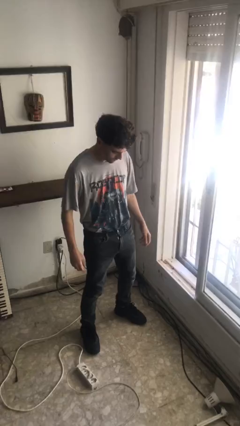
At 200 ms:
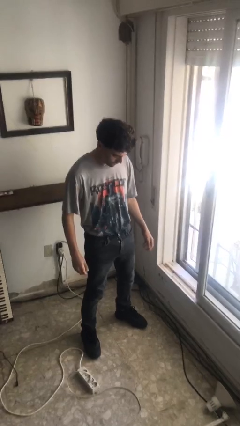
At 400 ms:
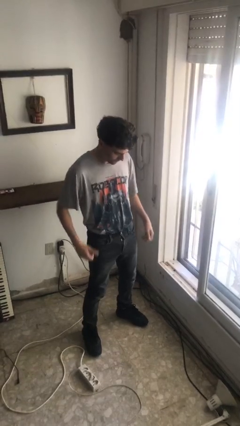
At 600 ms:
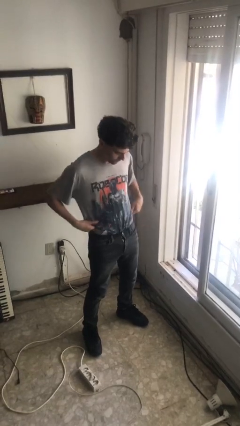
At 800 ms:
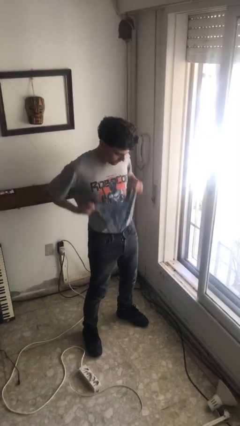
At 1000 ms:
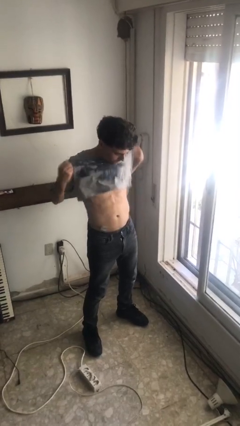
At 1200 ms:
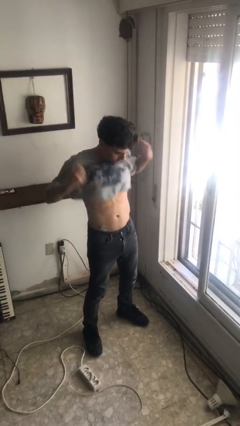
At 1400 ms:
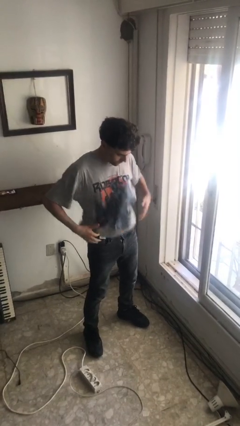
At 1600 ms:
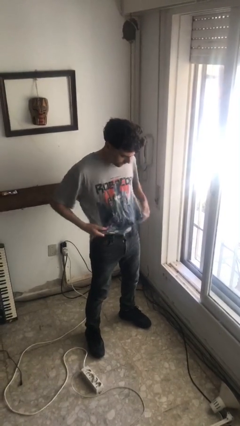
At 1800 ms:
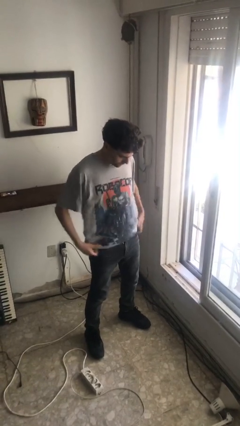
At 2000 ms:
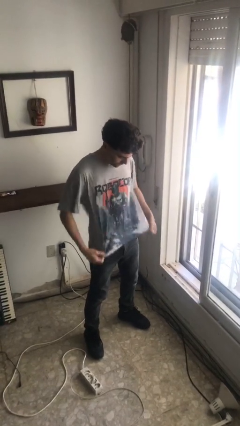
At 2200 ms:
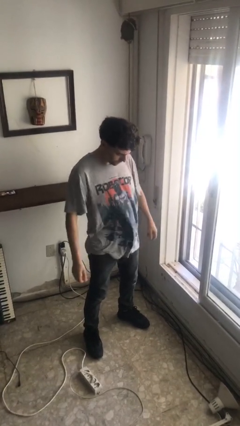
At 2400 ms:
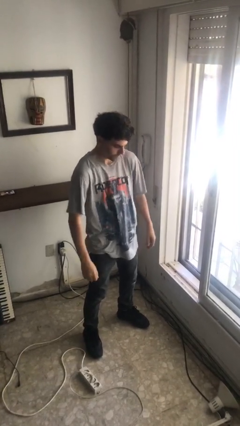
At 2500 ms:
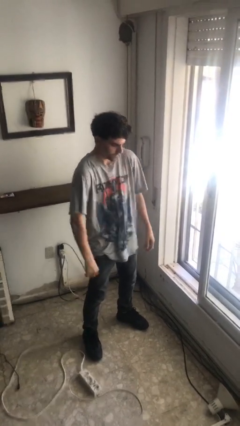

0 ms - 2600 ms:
person untucks shirt

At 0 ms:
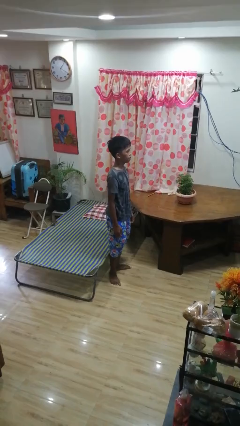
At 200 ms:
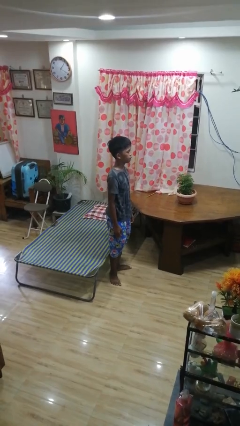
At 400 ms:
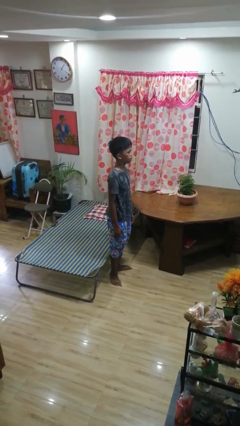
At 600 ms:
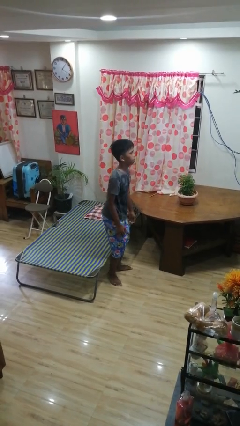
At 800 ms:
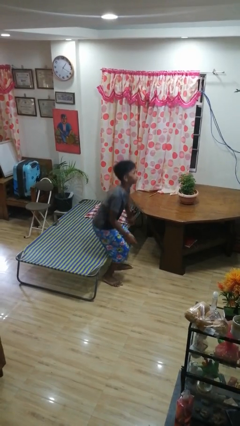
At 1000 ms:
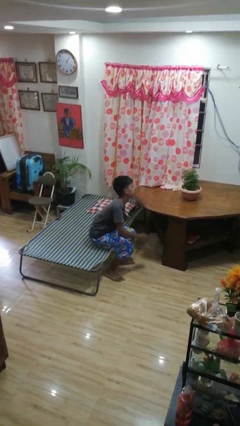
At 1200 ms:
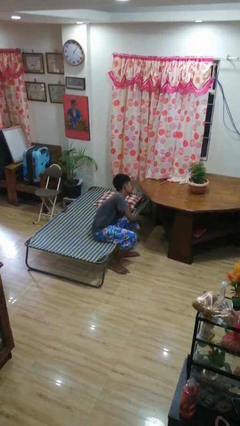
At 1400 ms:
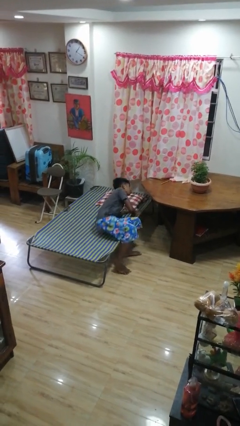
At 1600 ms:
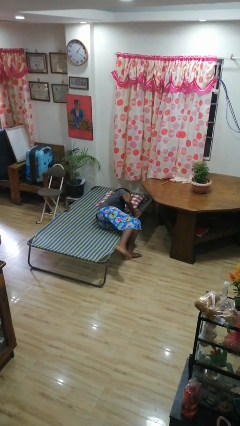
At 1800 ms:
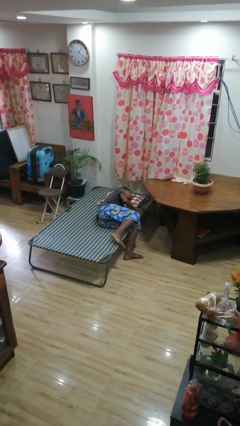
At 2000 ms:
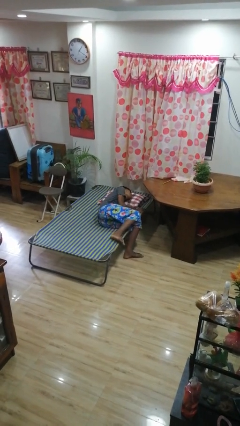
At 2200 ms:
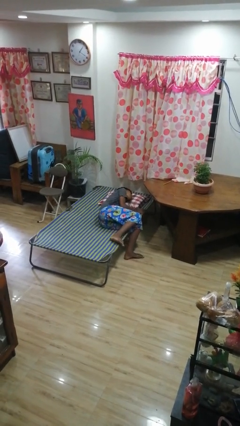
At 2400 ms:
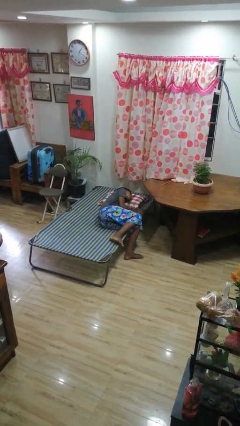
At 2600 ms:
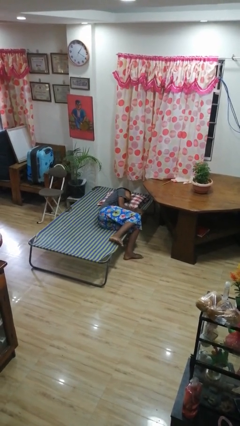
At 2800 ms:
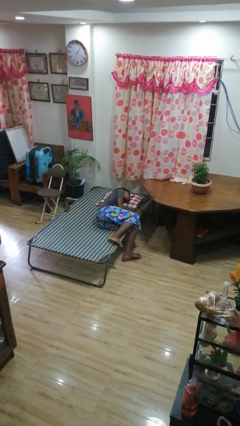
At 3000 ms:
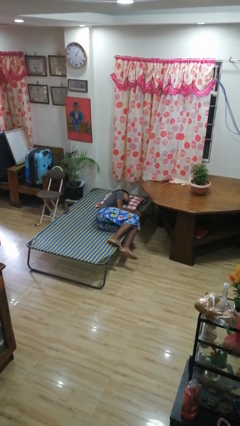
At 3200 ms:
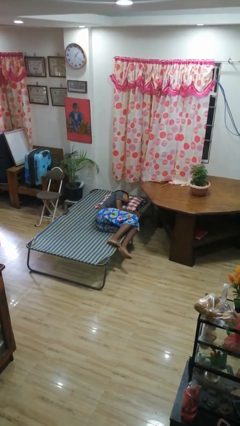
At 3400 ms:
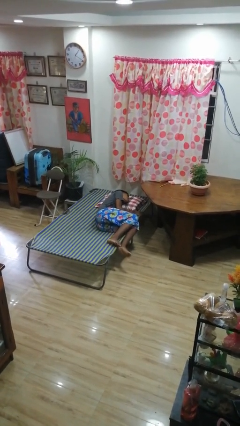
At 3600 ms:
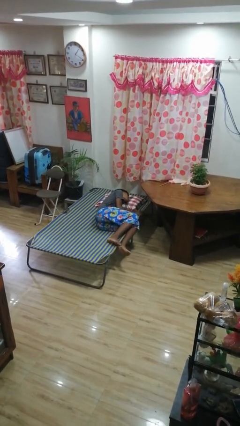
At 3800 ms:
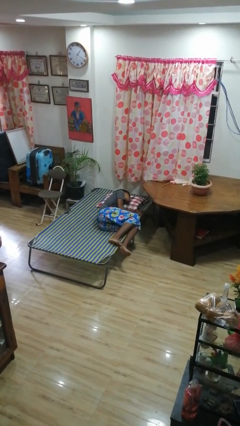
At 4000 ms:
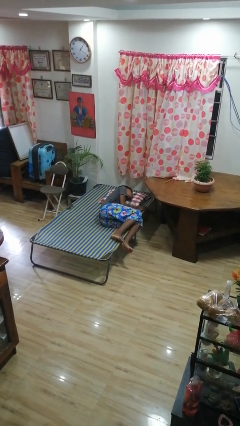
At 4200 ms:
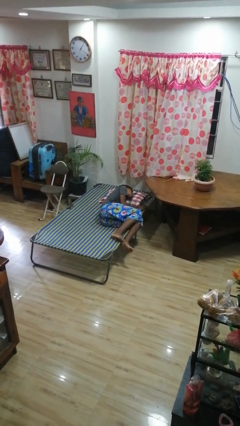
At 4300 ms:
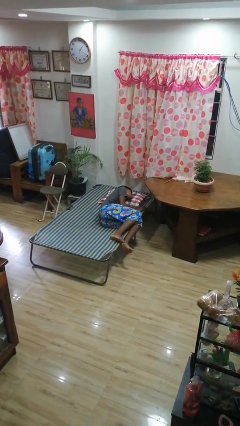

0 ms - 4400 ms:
person lies down on bed

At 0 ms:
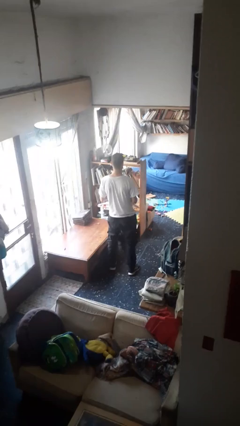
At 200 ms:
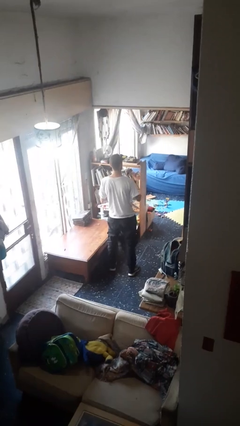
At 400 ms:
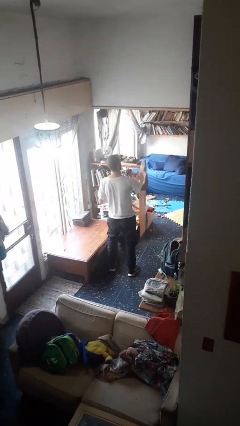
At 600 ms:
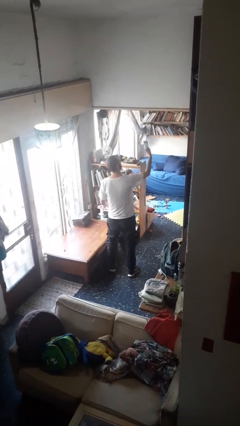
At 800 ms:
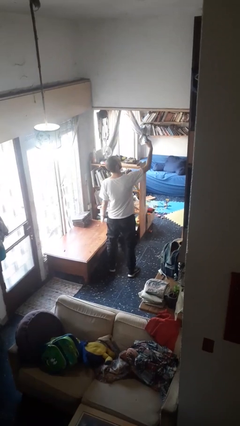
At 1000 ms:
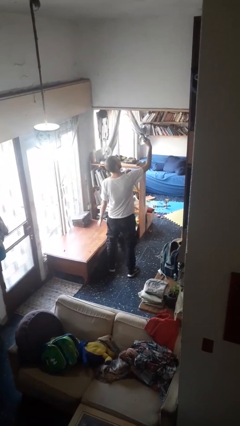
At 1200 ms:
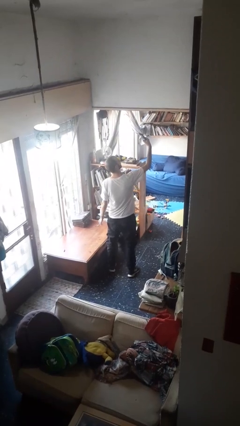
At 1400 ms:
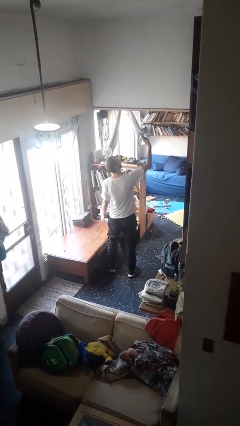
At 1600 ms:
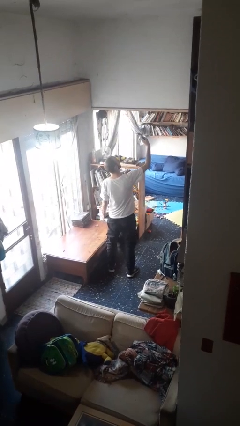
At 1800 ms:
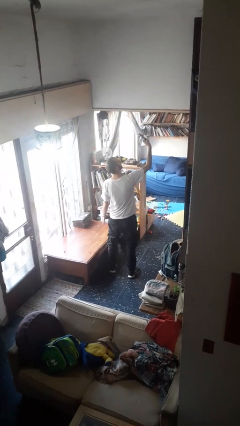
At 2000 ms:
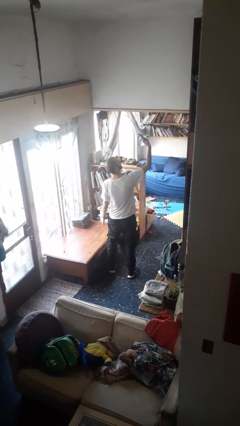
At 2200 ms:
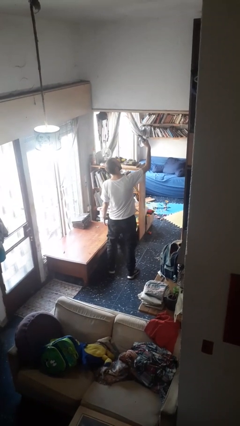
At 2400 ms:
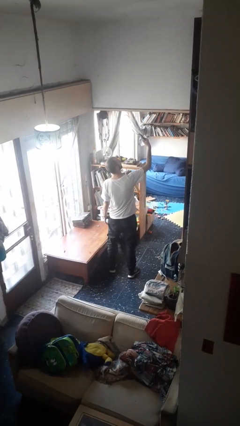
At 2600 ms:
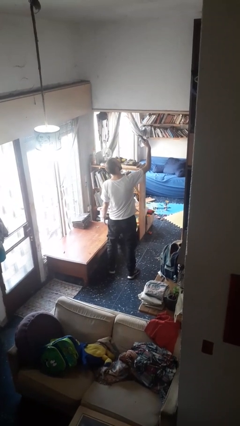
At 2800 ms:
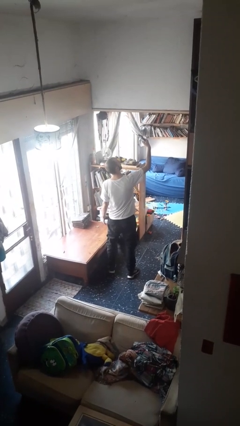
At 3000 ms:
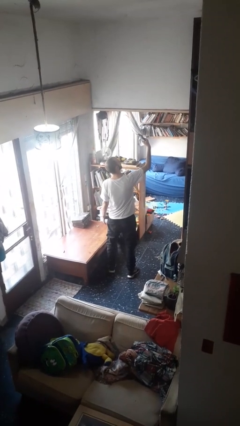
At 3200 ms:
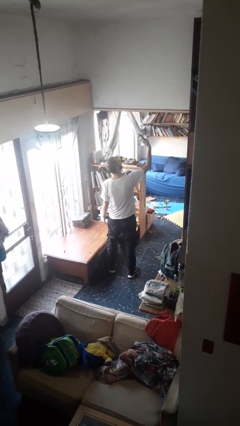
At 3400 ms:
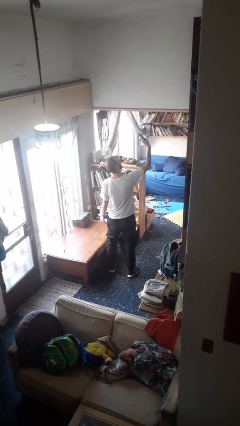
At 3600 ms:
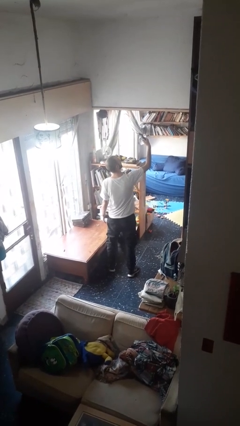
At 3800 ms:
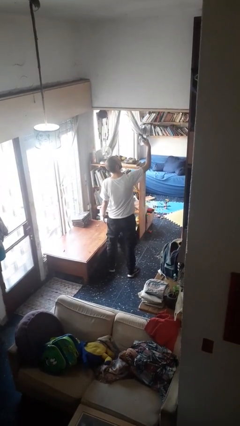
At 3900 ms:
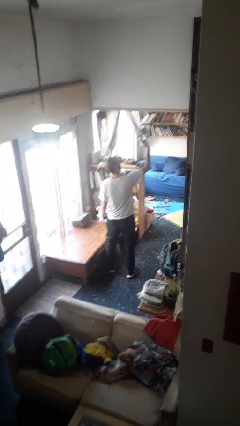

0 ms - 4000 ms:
person takes selfie

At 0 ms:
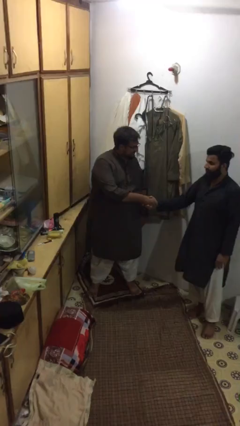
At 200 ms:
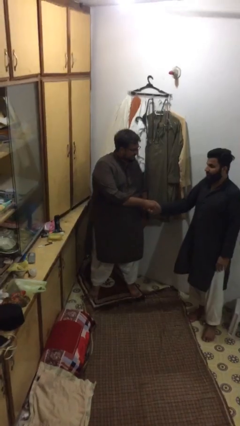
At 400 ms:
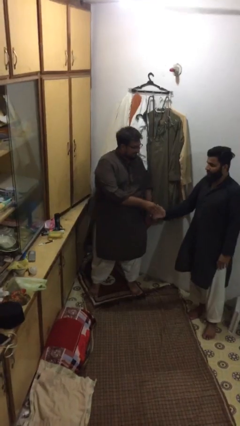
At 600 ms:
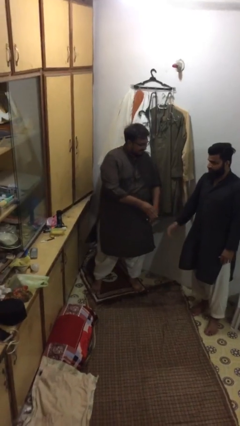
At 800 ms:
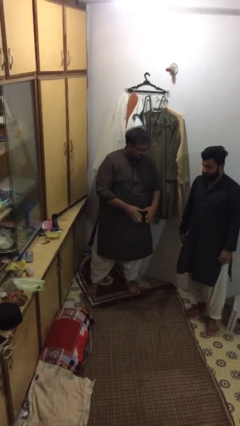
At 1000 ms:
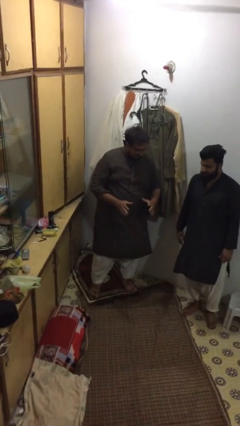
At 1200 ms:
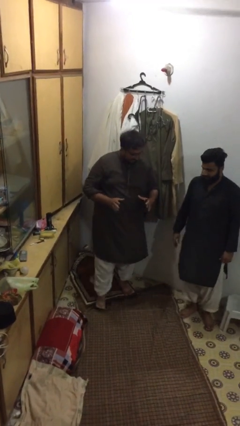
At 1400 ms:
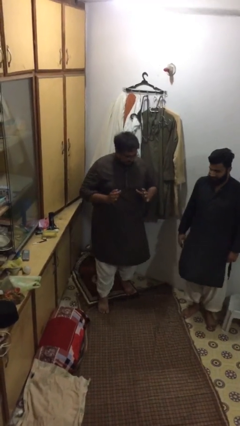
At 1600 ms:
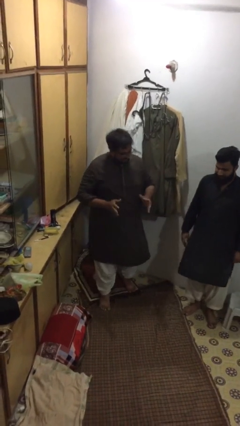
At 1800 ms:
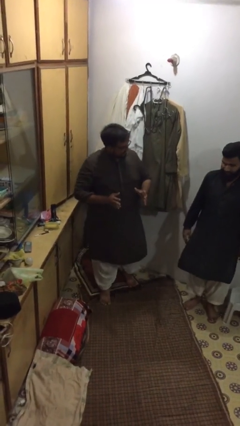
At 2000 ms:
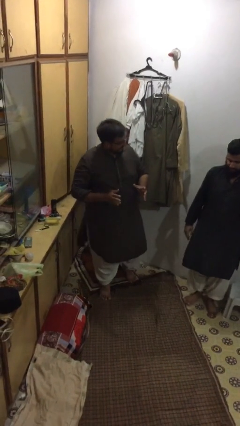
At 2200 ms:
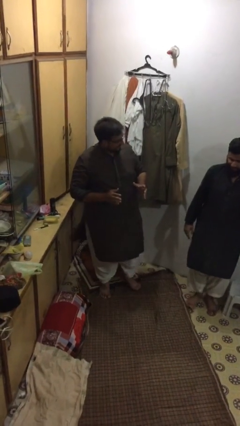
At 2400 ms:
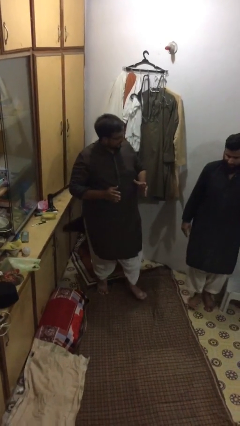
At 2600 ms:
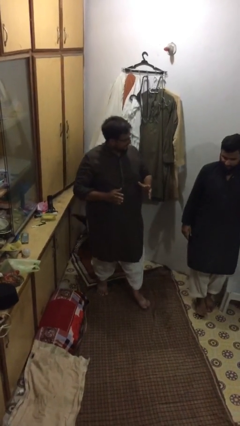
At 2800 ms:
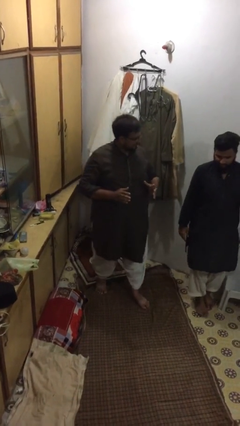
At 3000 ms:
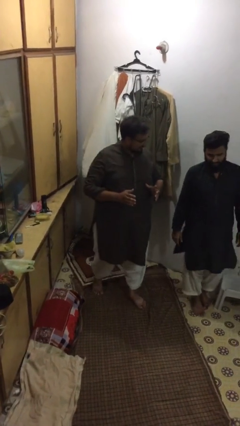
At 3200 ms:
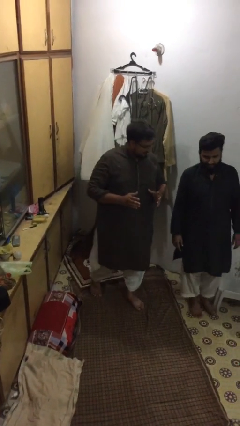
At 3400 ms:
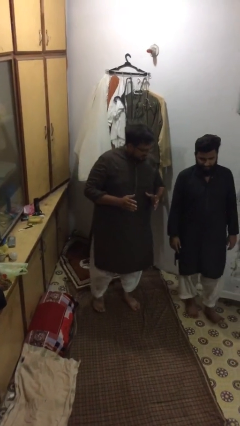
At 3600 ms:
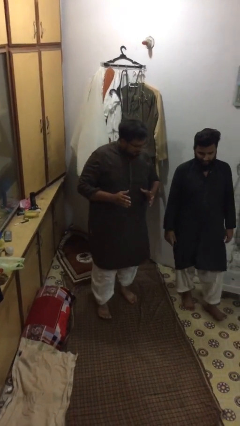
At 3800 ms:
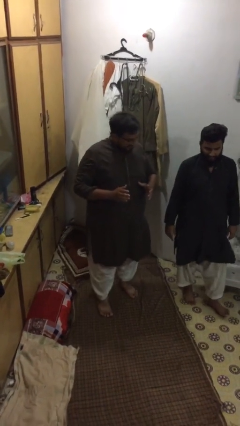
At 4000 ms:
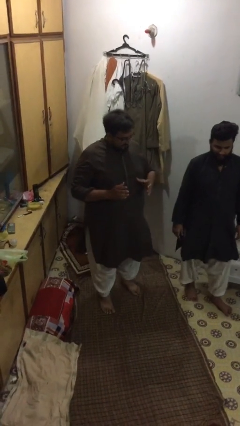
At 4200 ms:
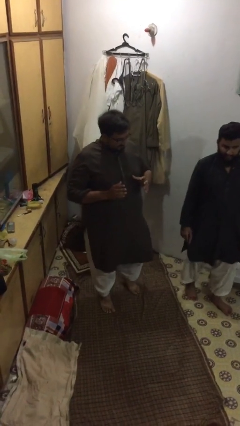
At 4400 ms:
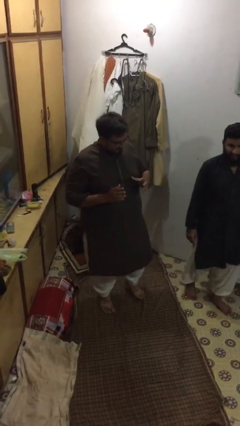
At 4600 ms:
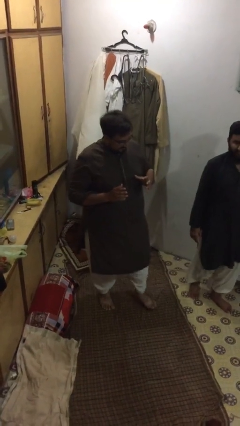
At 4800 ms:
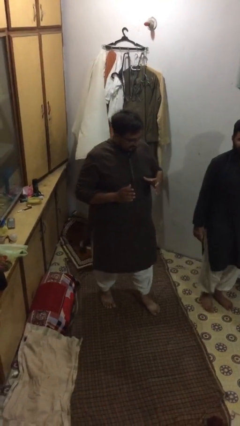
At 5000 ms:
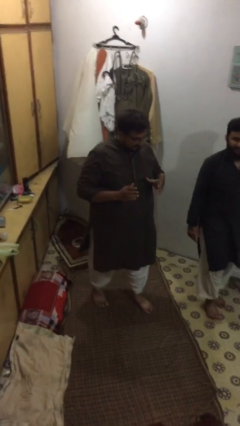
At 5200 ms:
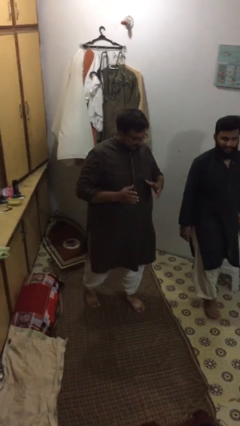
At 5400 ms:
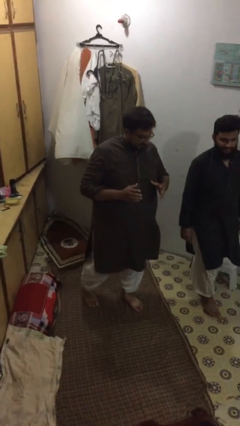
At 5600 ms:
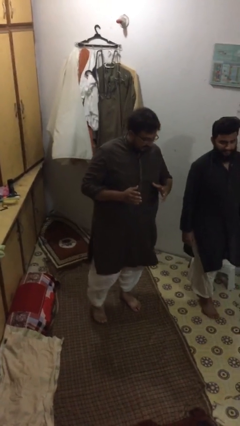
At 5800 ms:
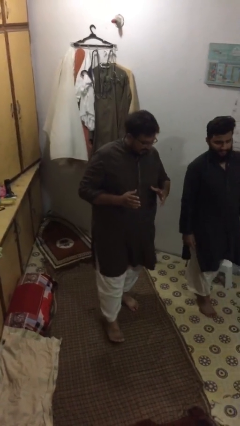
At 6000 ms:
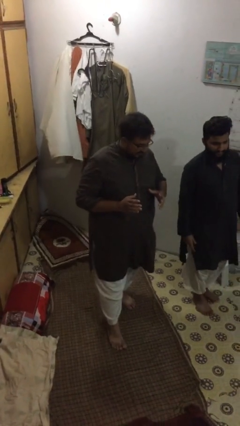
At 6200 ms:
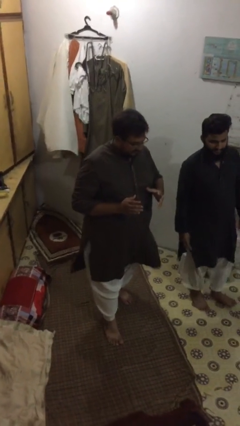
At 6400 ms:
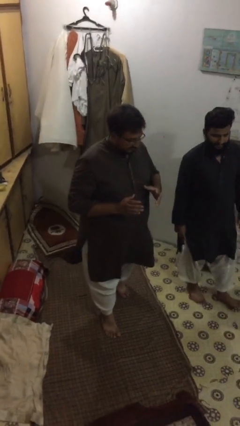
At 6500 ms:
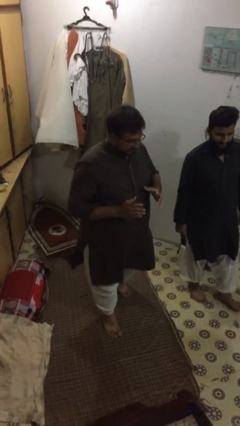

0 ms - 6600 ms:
person talks to person

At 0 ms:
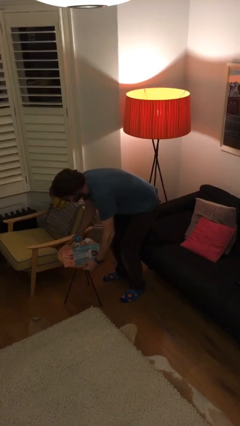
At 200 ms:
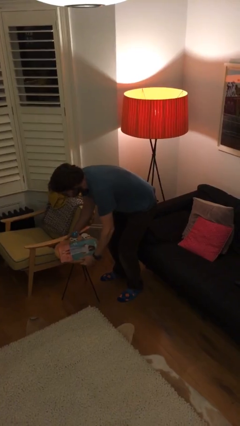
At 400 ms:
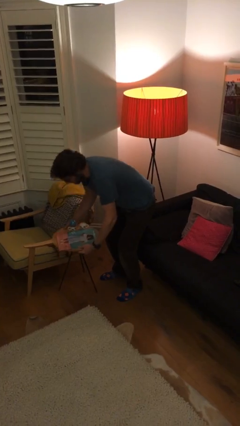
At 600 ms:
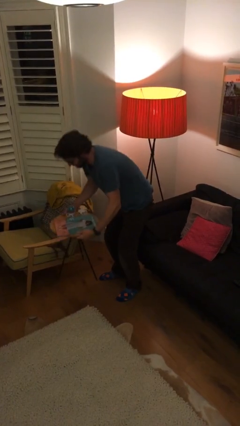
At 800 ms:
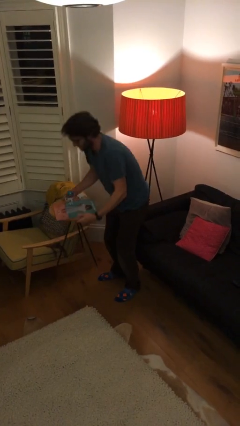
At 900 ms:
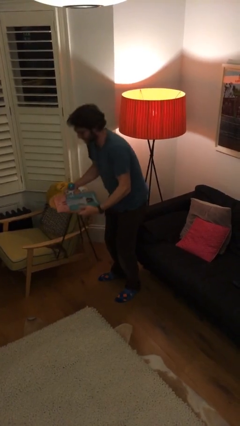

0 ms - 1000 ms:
person picks up object from floor
